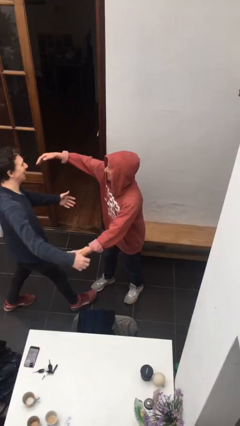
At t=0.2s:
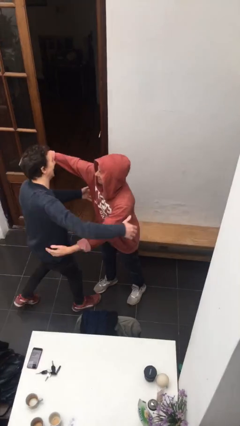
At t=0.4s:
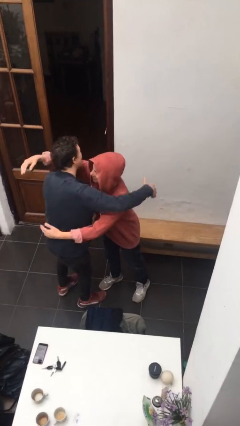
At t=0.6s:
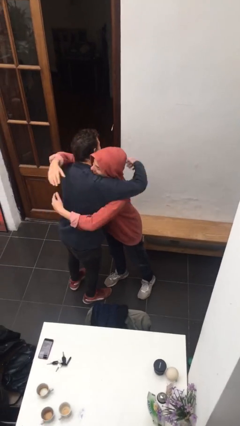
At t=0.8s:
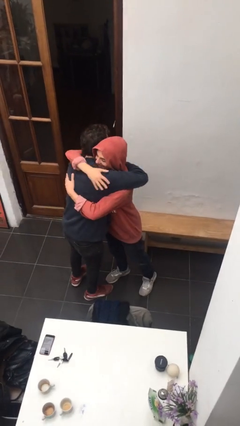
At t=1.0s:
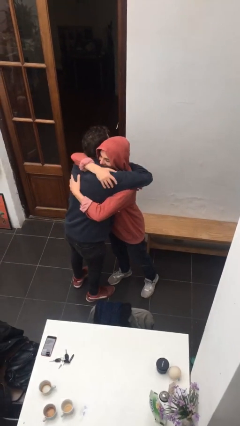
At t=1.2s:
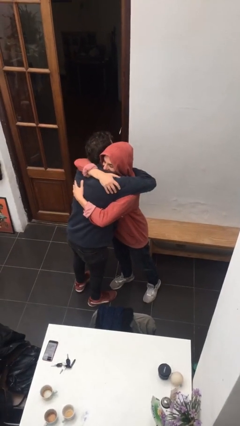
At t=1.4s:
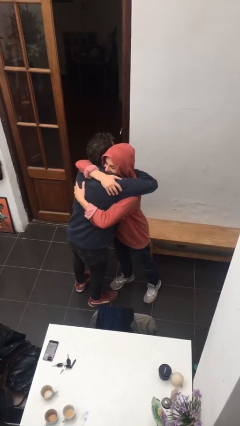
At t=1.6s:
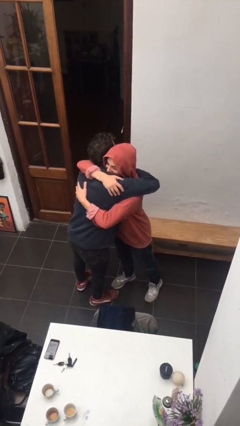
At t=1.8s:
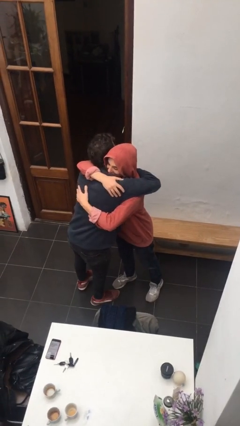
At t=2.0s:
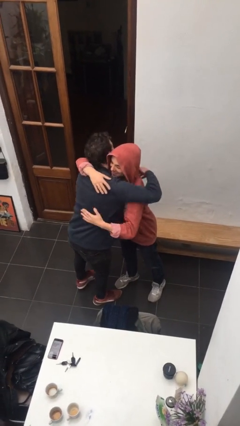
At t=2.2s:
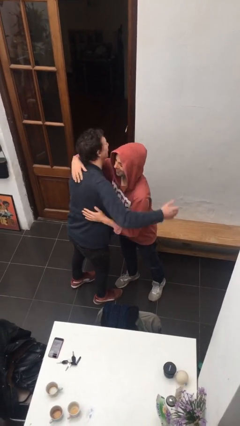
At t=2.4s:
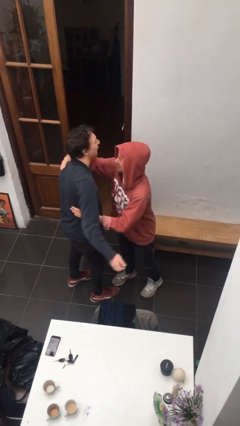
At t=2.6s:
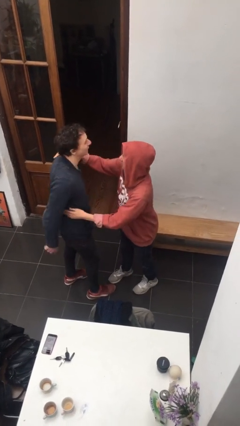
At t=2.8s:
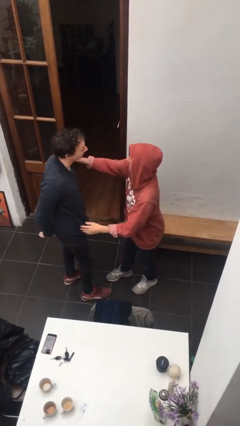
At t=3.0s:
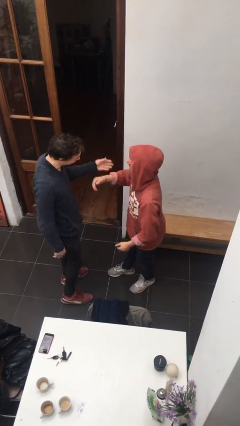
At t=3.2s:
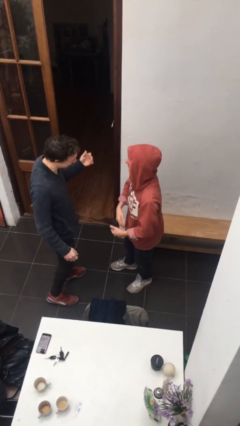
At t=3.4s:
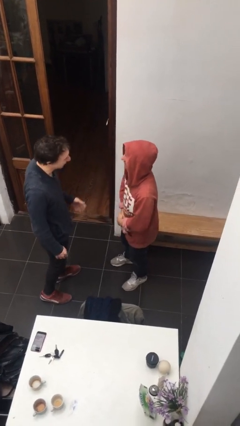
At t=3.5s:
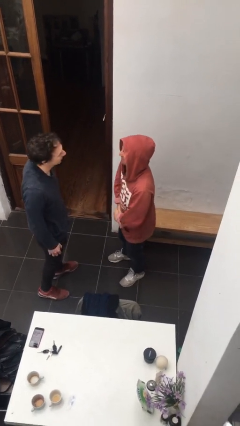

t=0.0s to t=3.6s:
person embraces person

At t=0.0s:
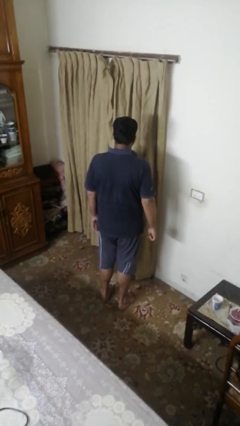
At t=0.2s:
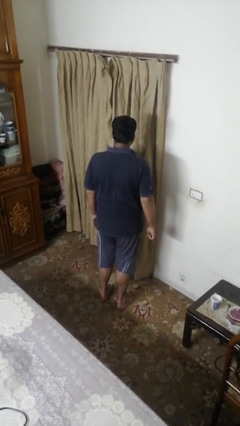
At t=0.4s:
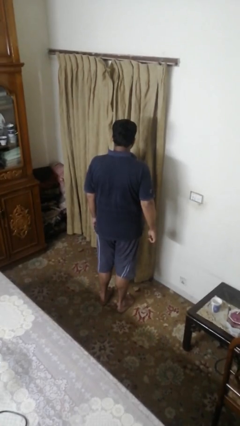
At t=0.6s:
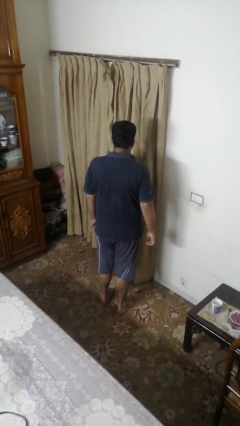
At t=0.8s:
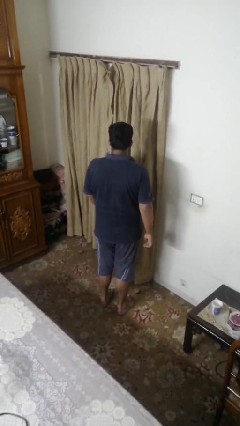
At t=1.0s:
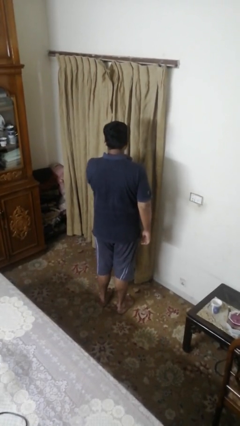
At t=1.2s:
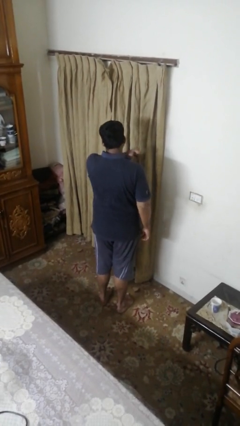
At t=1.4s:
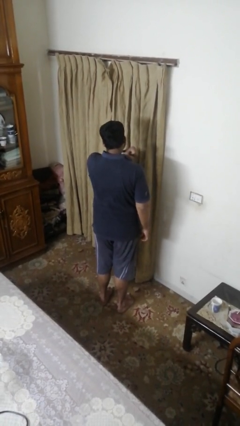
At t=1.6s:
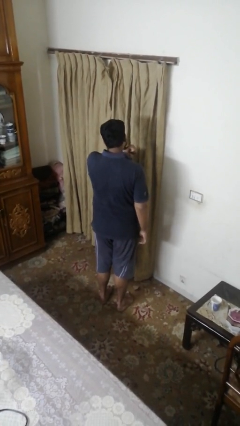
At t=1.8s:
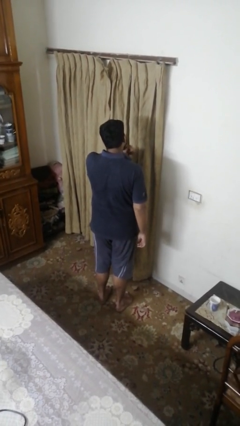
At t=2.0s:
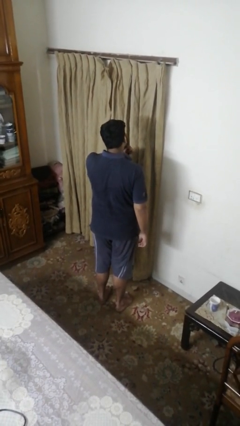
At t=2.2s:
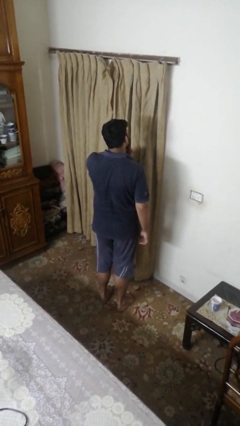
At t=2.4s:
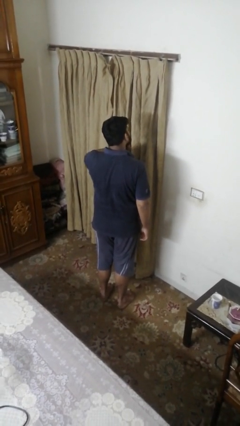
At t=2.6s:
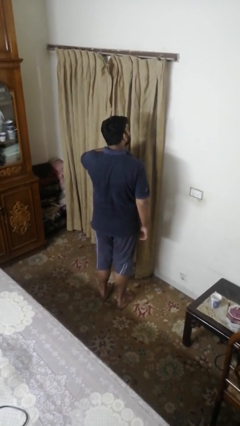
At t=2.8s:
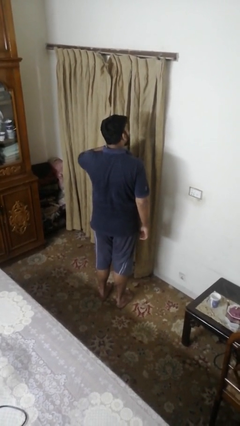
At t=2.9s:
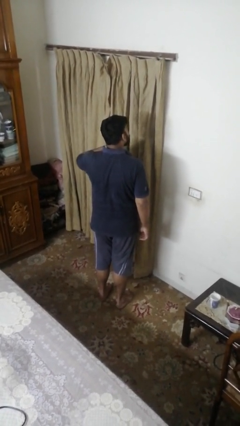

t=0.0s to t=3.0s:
person gestures cut

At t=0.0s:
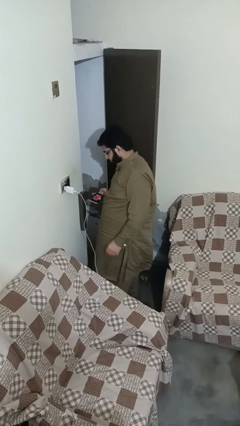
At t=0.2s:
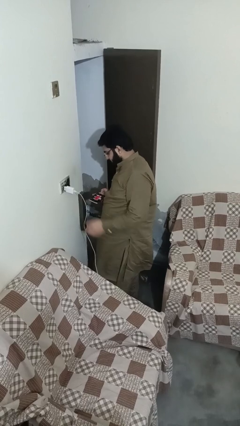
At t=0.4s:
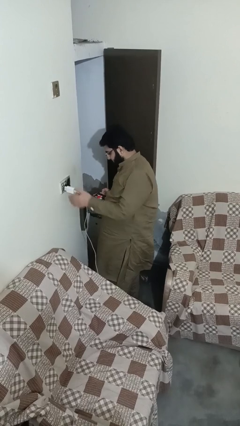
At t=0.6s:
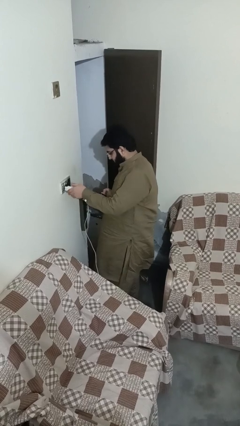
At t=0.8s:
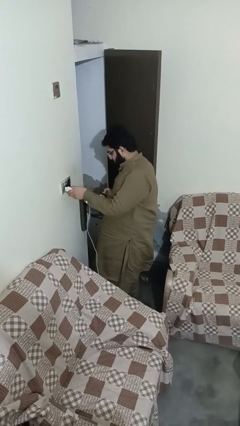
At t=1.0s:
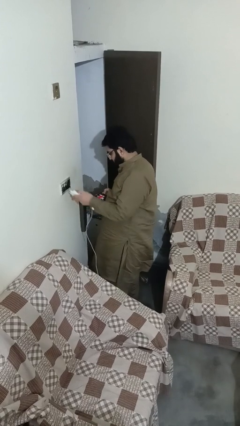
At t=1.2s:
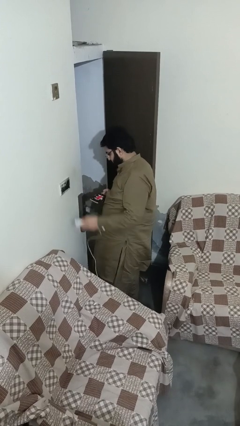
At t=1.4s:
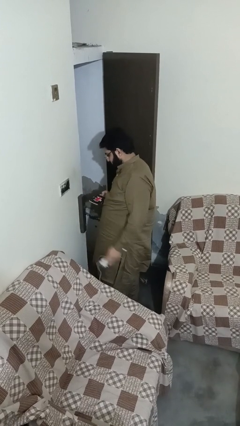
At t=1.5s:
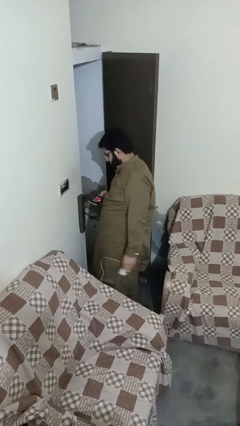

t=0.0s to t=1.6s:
person unplugs from electrical socket

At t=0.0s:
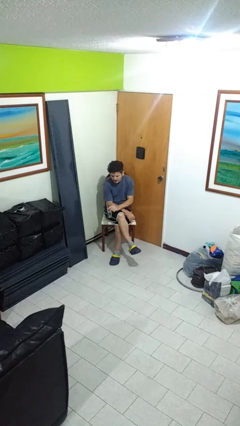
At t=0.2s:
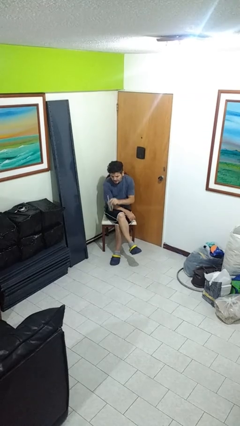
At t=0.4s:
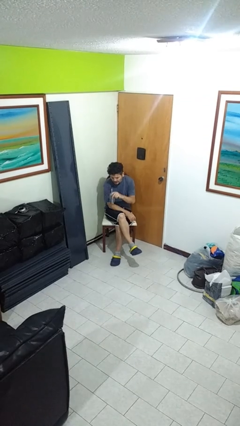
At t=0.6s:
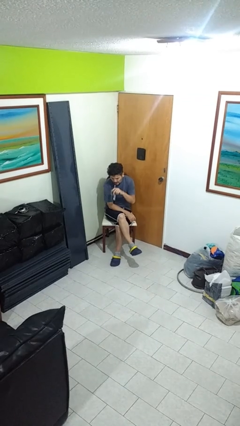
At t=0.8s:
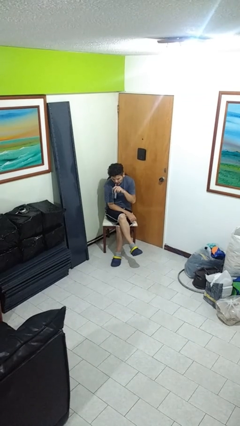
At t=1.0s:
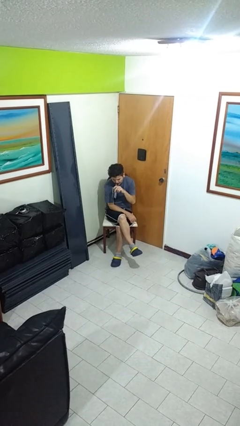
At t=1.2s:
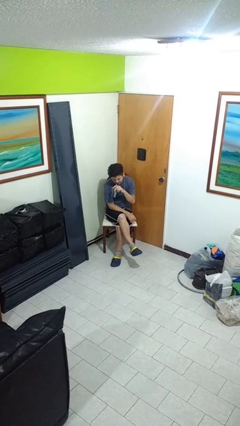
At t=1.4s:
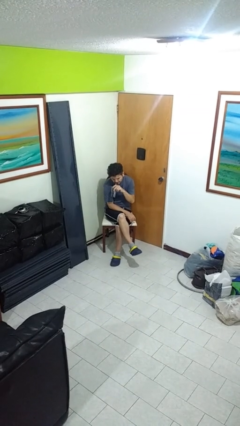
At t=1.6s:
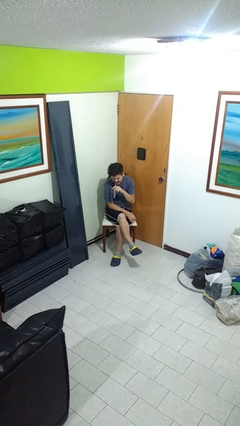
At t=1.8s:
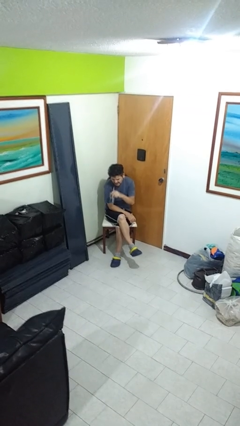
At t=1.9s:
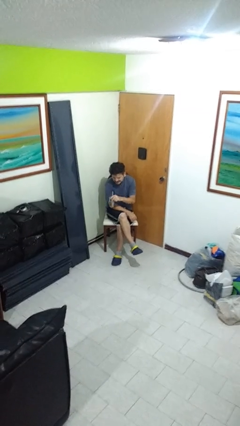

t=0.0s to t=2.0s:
person drinks from straw

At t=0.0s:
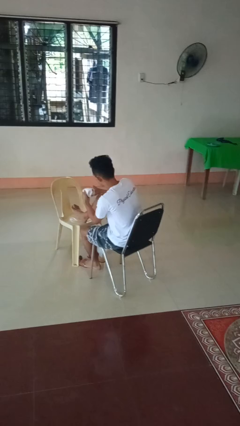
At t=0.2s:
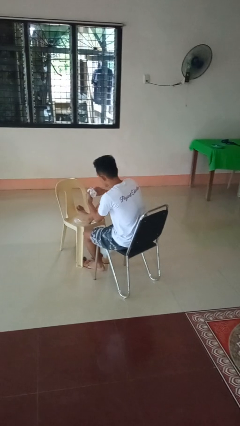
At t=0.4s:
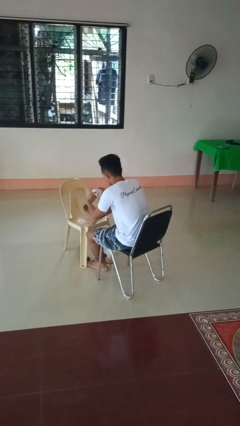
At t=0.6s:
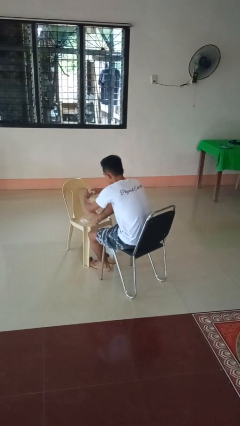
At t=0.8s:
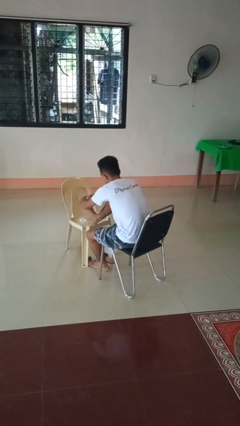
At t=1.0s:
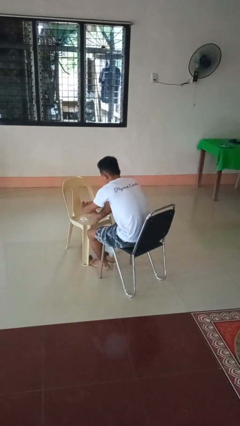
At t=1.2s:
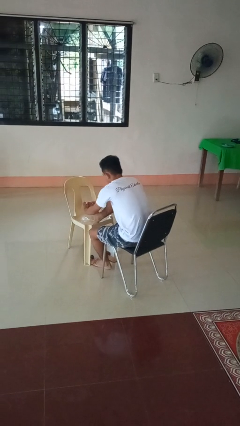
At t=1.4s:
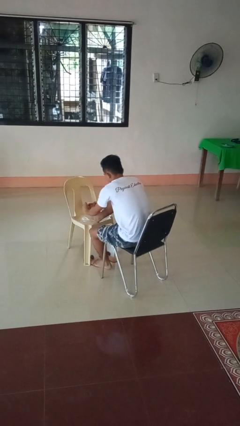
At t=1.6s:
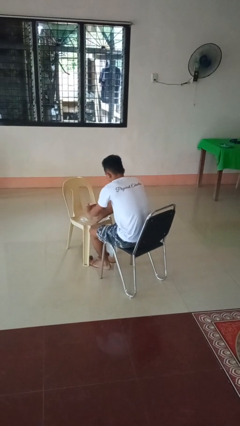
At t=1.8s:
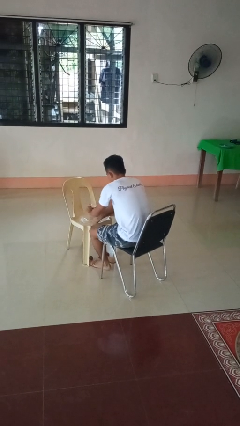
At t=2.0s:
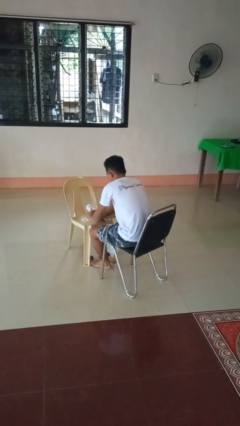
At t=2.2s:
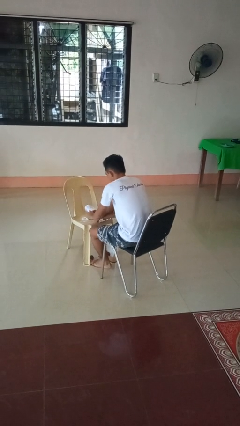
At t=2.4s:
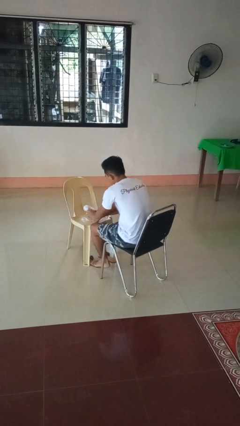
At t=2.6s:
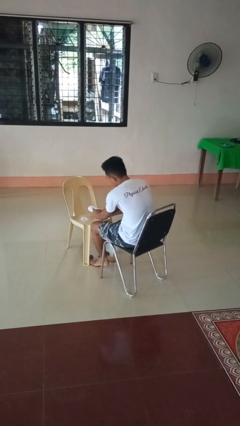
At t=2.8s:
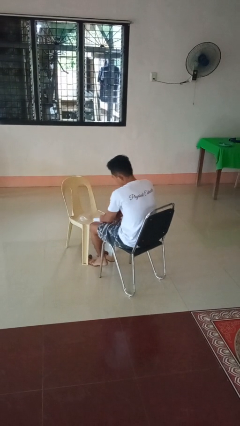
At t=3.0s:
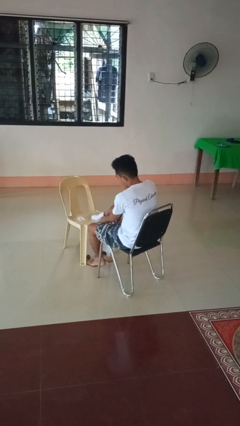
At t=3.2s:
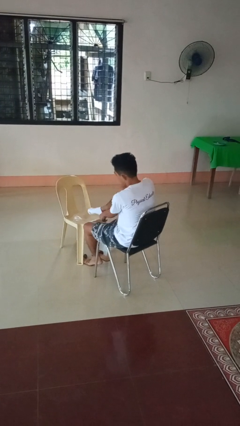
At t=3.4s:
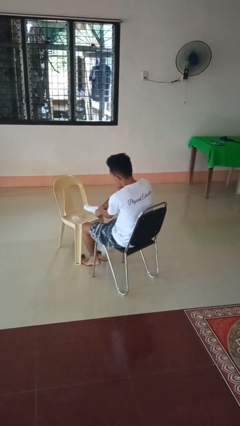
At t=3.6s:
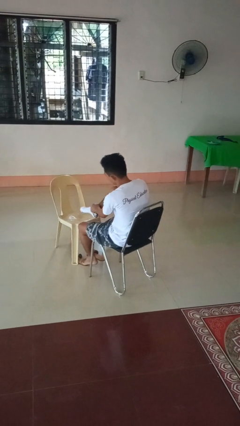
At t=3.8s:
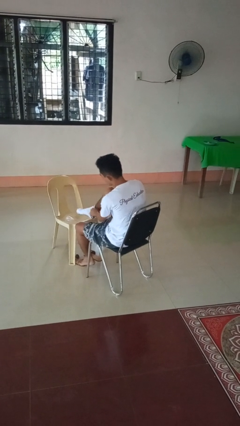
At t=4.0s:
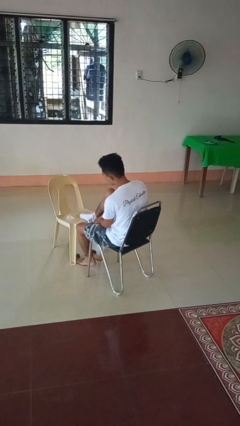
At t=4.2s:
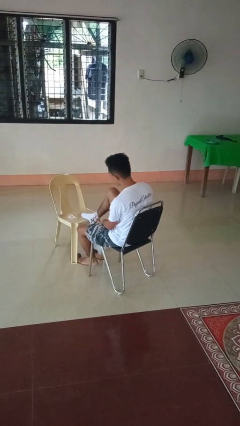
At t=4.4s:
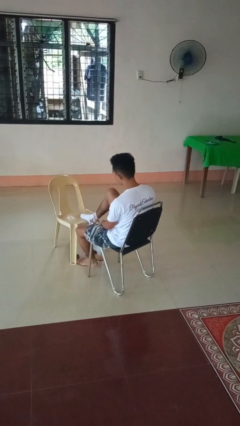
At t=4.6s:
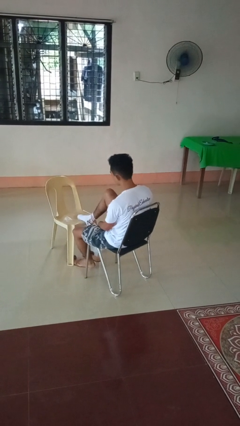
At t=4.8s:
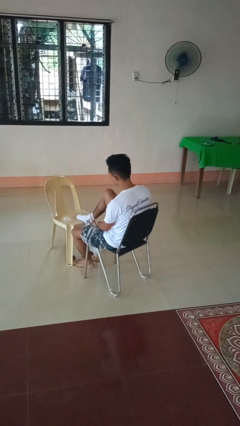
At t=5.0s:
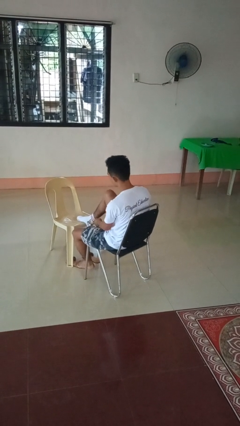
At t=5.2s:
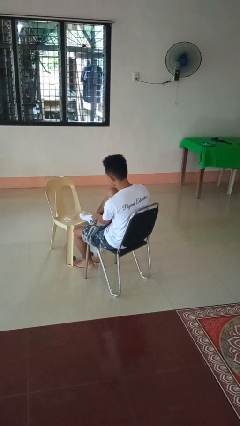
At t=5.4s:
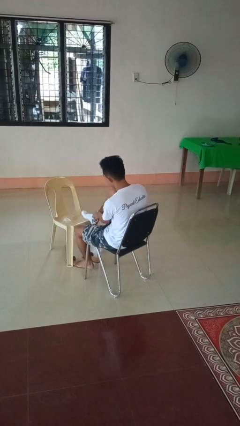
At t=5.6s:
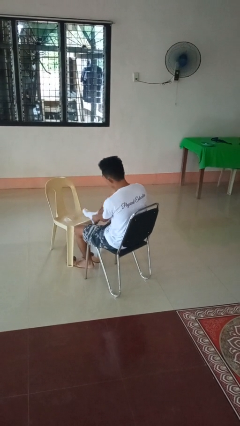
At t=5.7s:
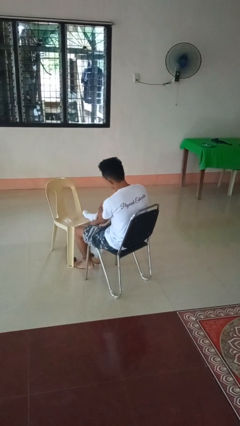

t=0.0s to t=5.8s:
person puts on socks

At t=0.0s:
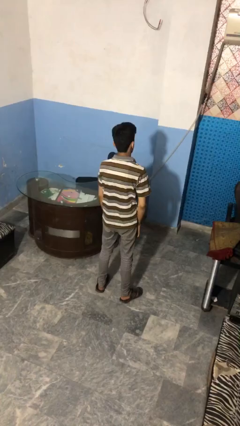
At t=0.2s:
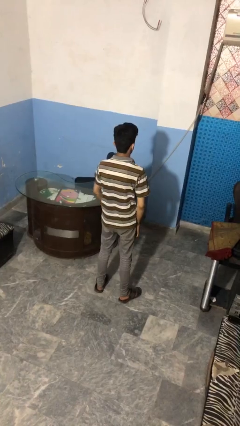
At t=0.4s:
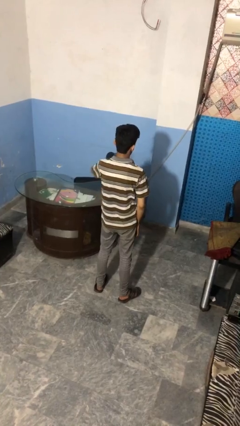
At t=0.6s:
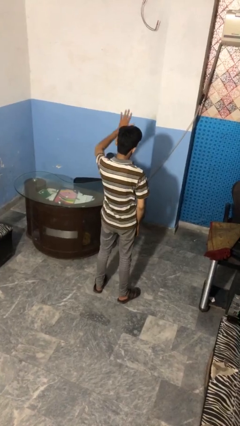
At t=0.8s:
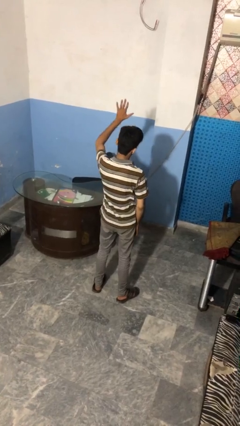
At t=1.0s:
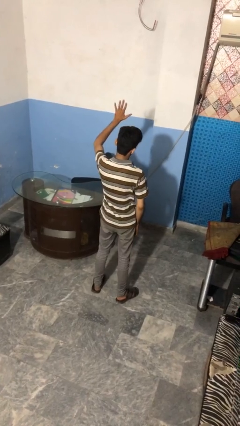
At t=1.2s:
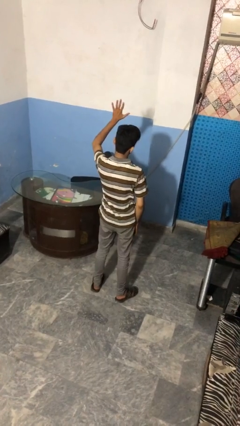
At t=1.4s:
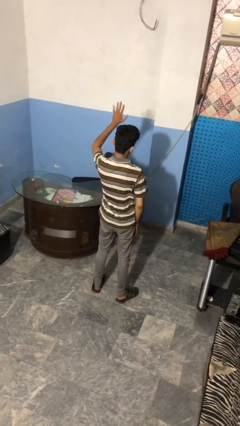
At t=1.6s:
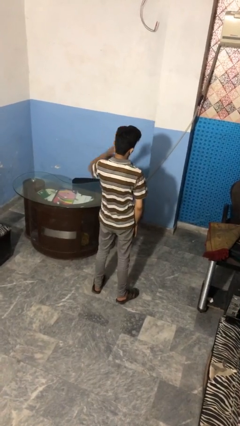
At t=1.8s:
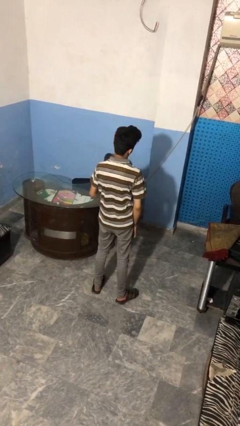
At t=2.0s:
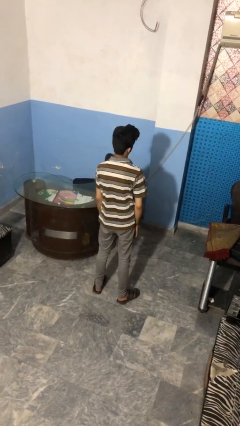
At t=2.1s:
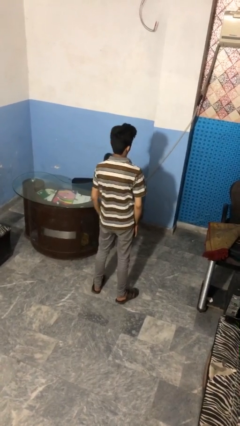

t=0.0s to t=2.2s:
person gestures number five
